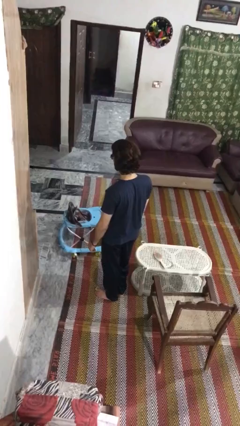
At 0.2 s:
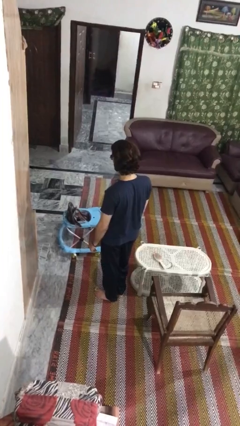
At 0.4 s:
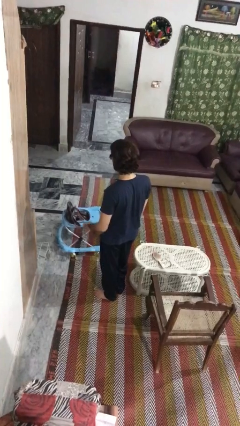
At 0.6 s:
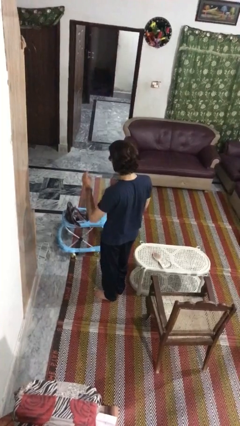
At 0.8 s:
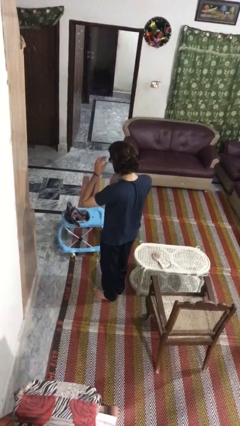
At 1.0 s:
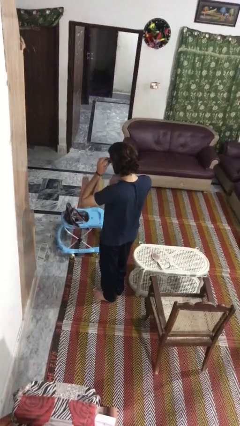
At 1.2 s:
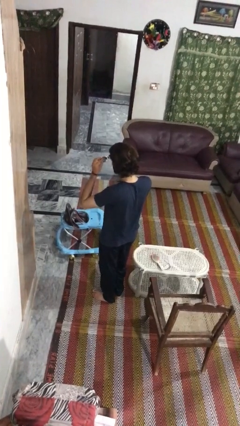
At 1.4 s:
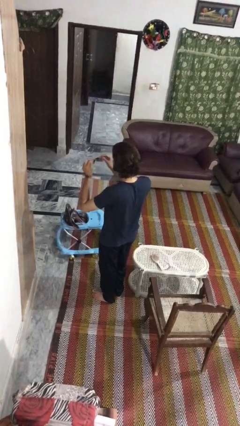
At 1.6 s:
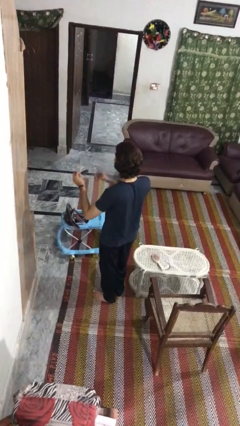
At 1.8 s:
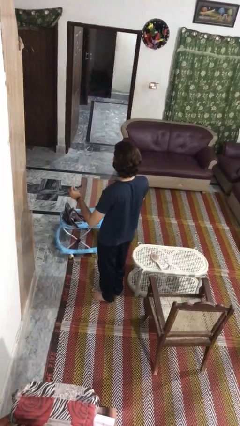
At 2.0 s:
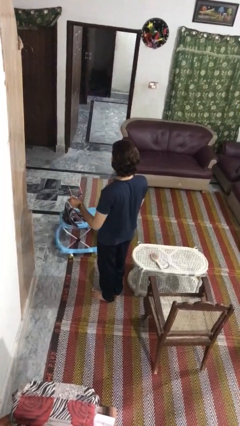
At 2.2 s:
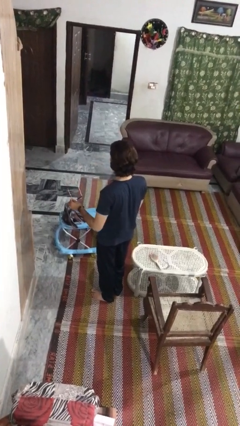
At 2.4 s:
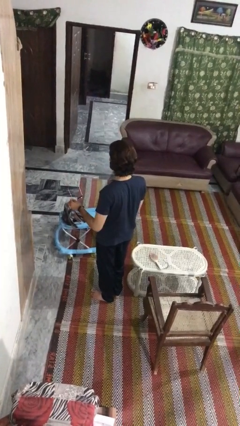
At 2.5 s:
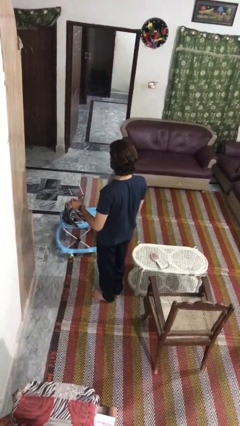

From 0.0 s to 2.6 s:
person takes off sunglasses

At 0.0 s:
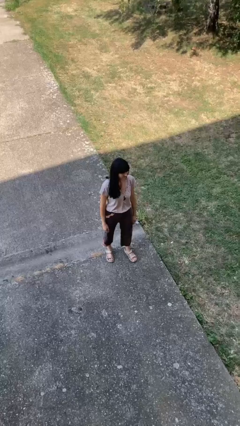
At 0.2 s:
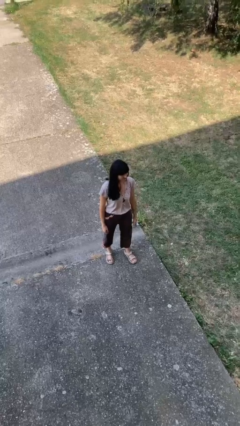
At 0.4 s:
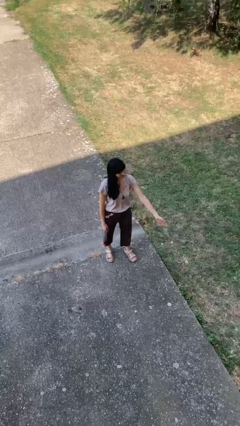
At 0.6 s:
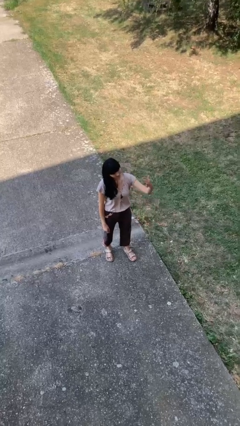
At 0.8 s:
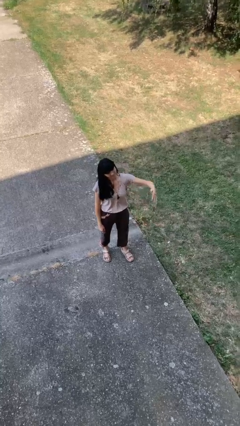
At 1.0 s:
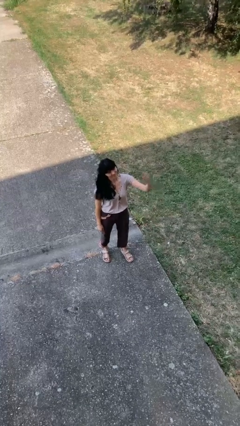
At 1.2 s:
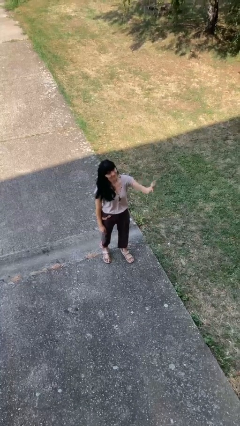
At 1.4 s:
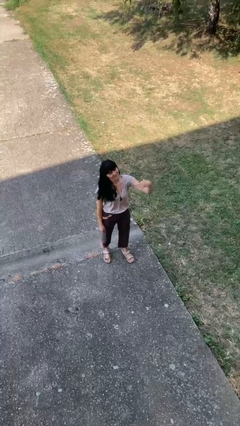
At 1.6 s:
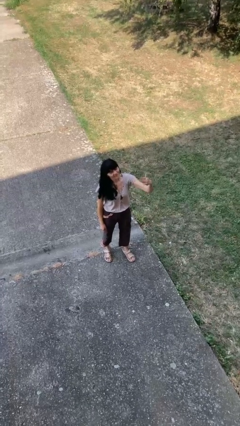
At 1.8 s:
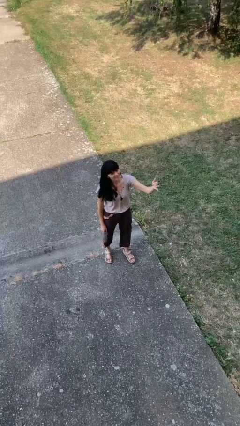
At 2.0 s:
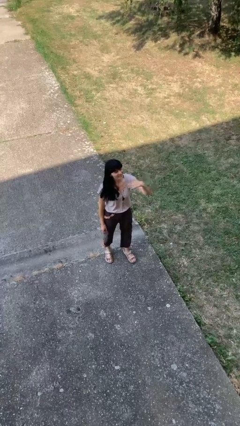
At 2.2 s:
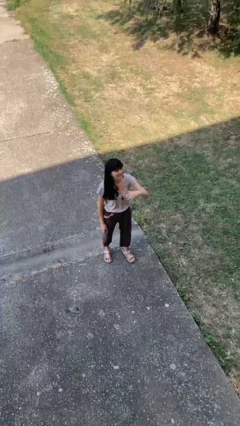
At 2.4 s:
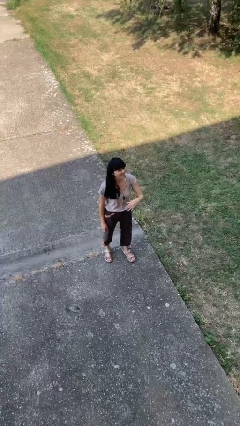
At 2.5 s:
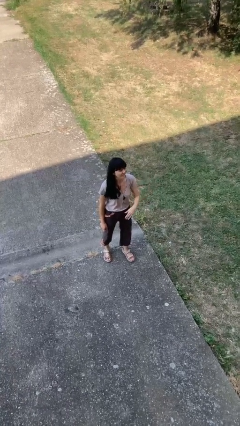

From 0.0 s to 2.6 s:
person gestures come here

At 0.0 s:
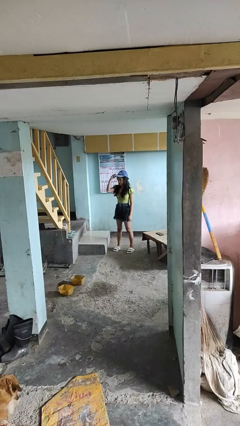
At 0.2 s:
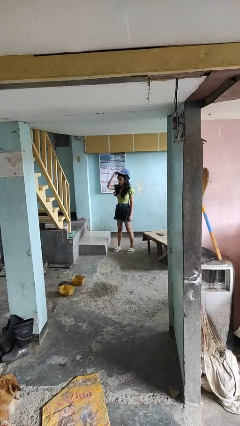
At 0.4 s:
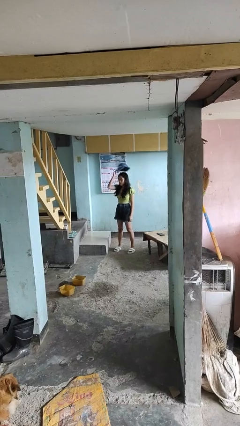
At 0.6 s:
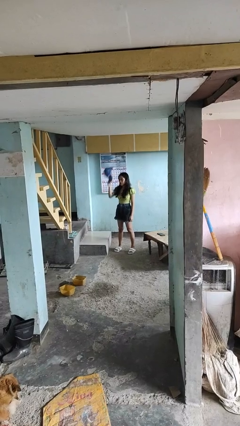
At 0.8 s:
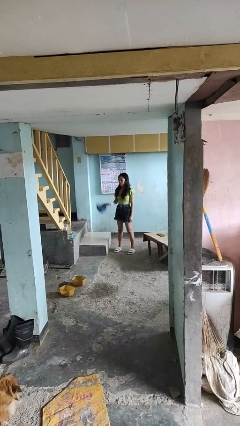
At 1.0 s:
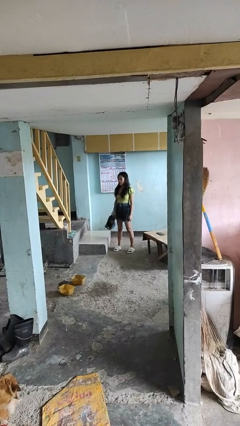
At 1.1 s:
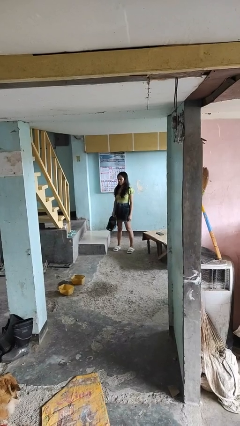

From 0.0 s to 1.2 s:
person takes off hat

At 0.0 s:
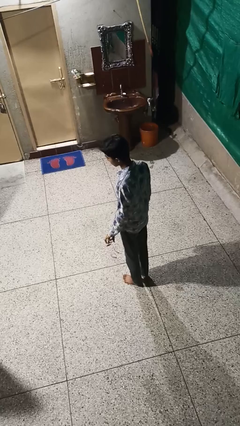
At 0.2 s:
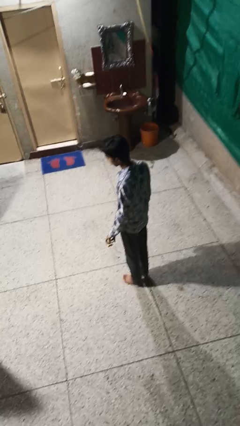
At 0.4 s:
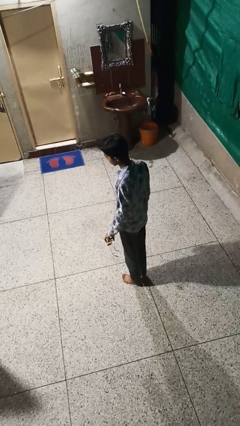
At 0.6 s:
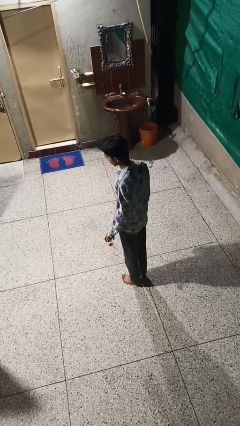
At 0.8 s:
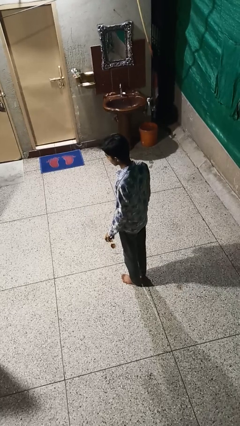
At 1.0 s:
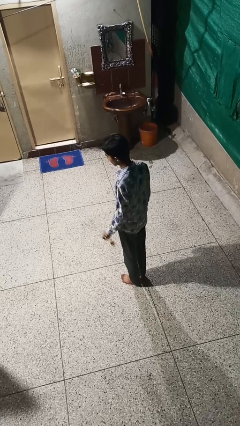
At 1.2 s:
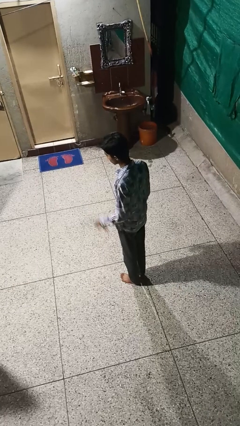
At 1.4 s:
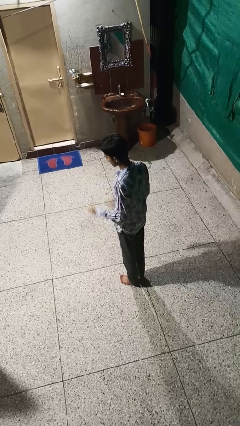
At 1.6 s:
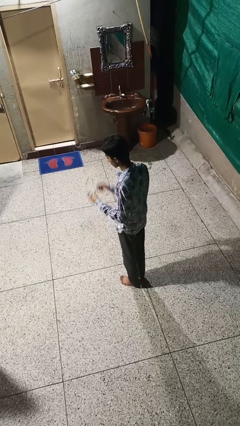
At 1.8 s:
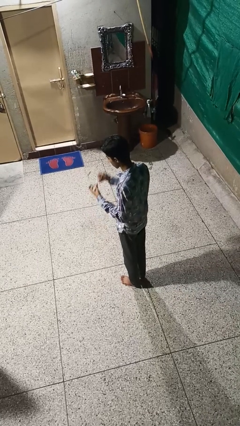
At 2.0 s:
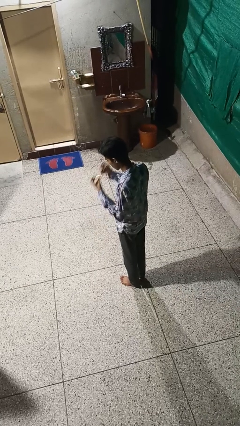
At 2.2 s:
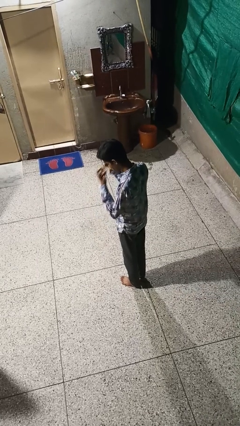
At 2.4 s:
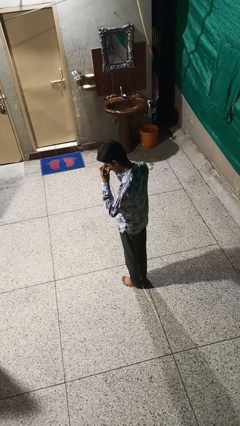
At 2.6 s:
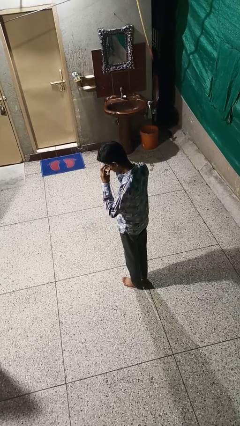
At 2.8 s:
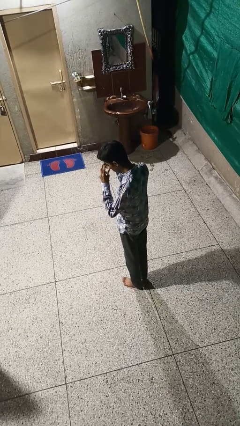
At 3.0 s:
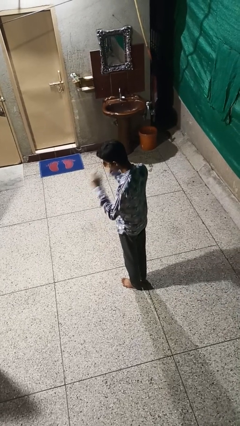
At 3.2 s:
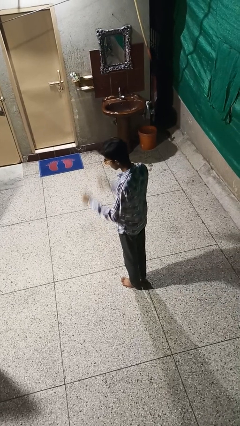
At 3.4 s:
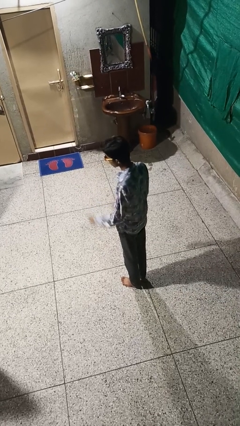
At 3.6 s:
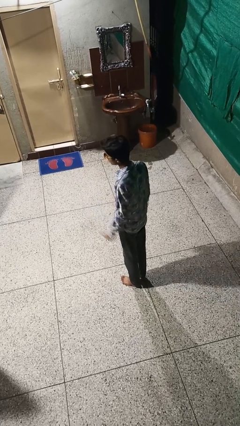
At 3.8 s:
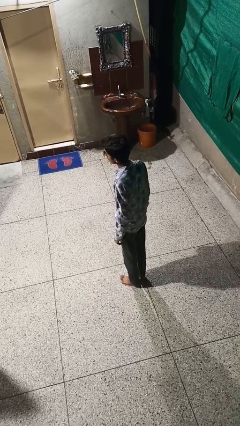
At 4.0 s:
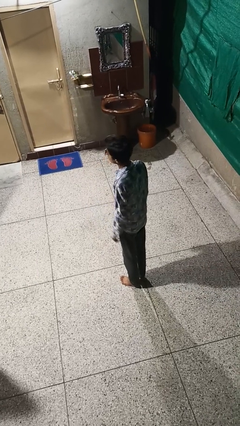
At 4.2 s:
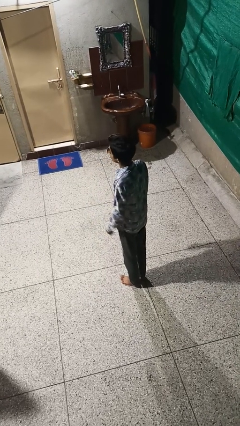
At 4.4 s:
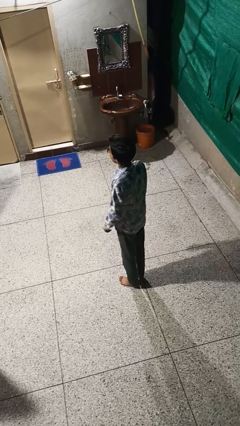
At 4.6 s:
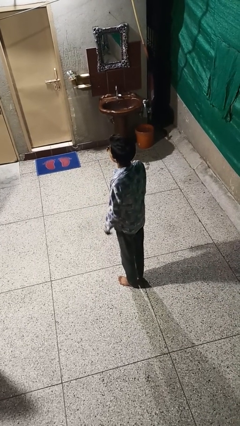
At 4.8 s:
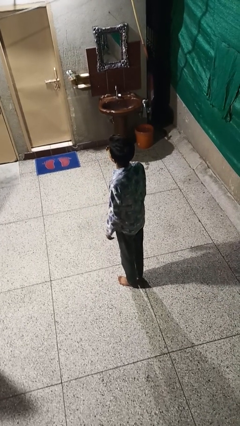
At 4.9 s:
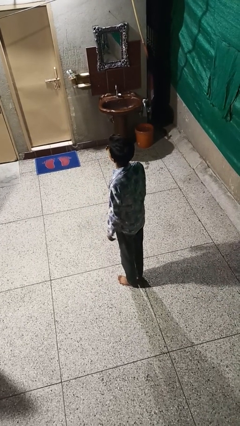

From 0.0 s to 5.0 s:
person puts on sunglasses

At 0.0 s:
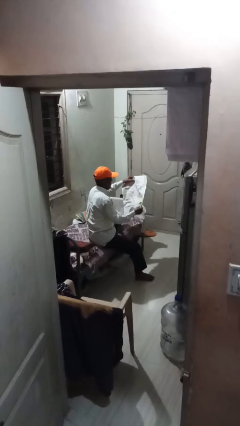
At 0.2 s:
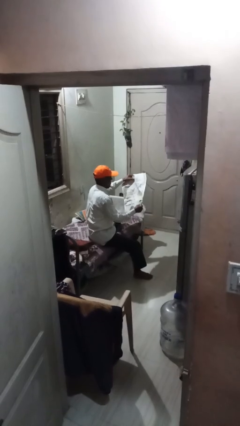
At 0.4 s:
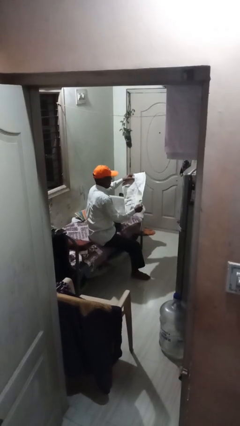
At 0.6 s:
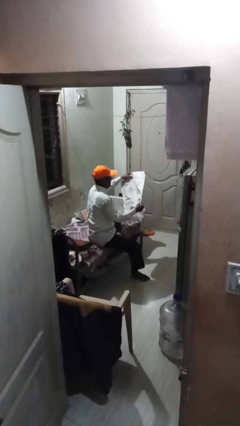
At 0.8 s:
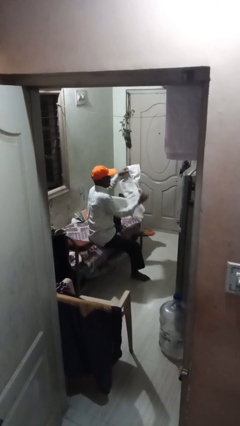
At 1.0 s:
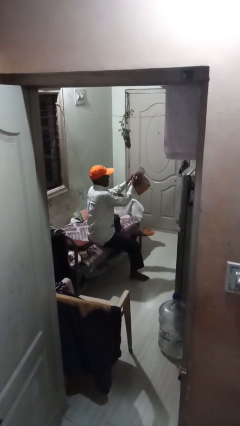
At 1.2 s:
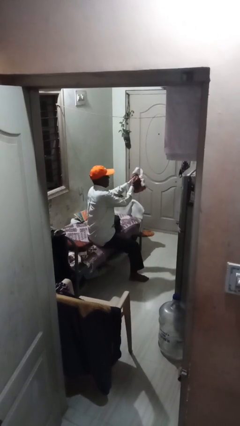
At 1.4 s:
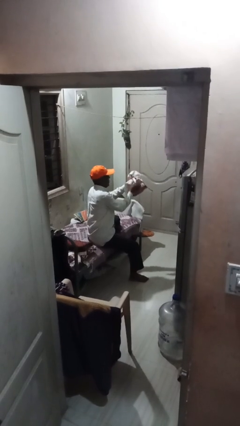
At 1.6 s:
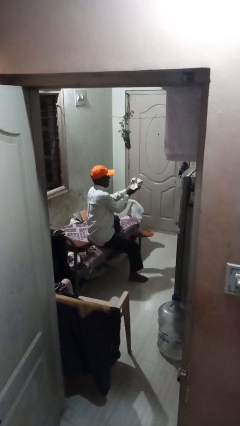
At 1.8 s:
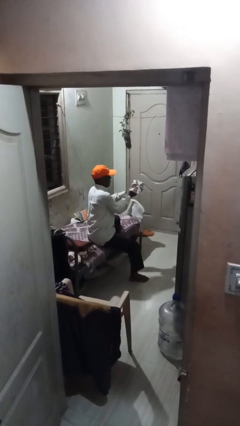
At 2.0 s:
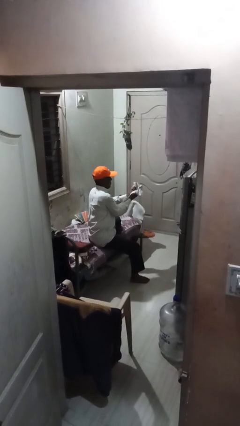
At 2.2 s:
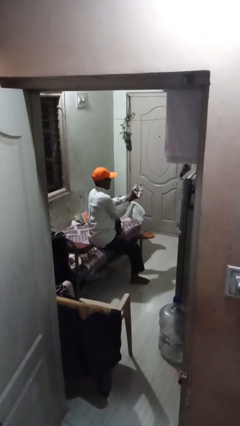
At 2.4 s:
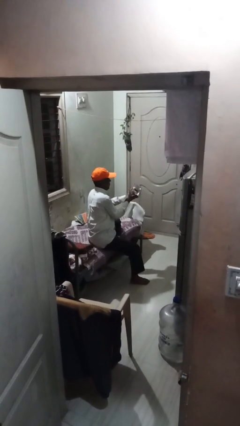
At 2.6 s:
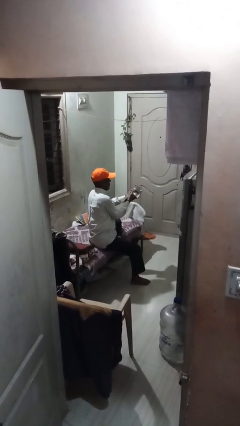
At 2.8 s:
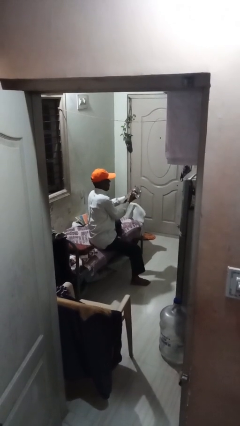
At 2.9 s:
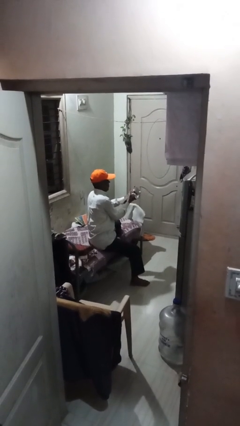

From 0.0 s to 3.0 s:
person crumples paper

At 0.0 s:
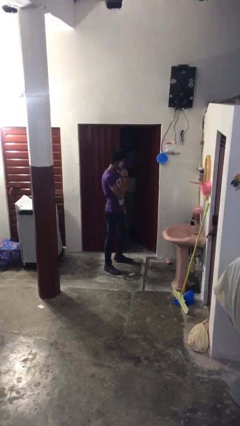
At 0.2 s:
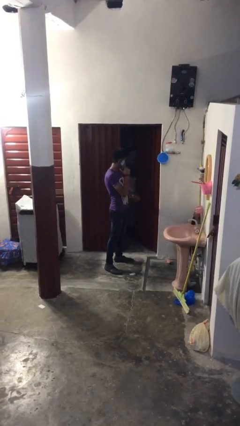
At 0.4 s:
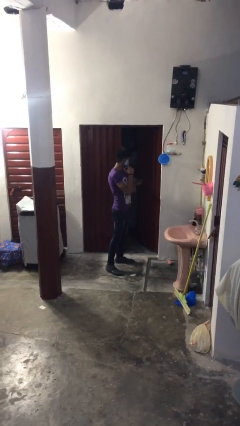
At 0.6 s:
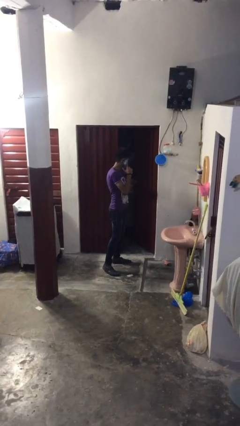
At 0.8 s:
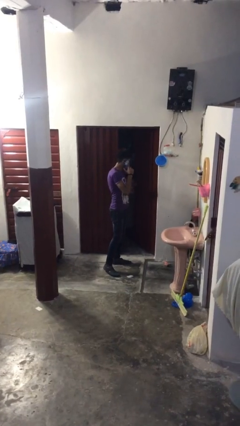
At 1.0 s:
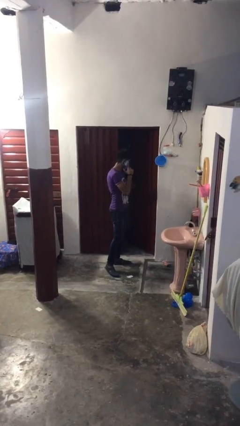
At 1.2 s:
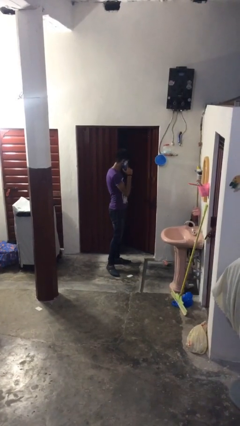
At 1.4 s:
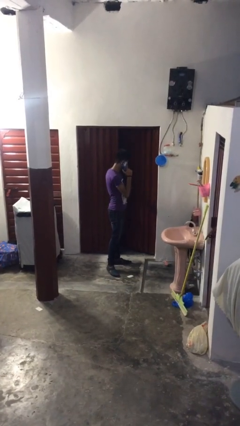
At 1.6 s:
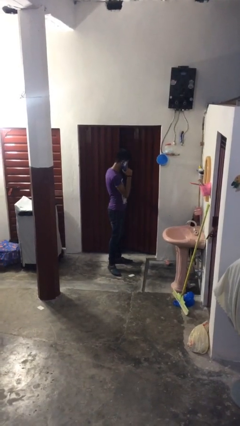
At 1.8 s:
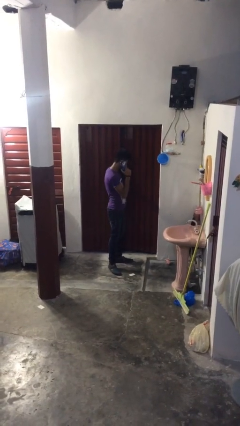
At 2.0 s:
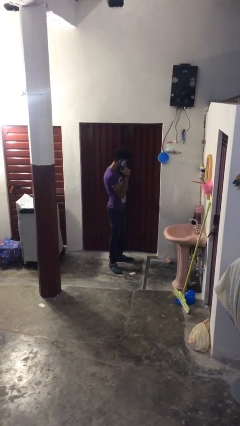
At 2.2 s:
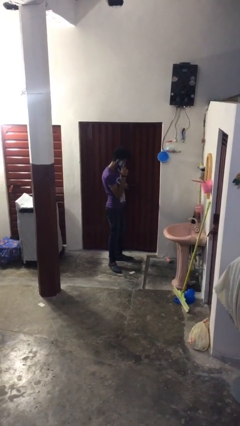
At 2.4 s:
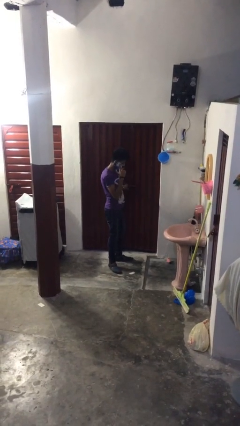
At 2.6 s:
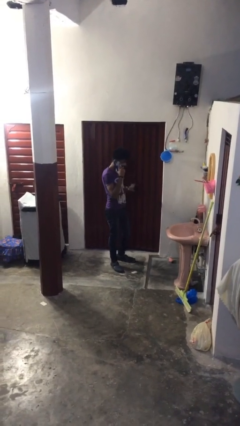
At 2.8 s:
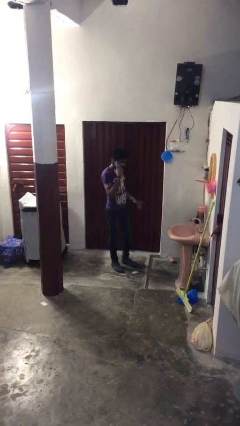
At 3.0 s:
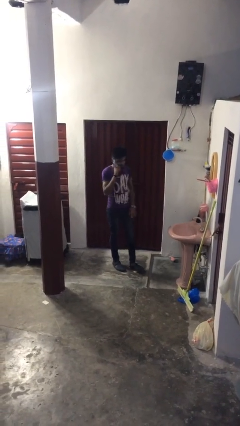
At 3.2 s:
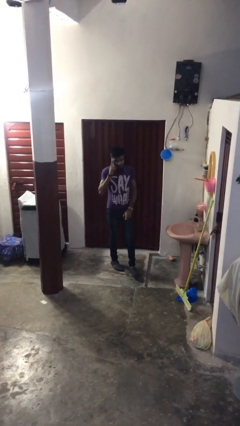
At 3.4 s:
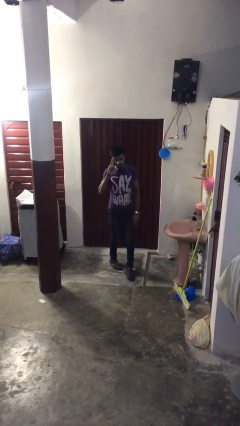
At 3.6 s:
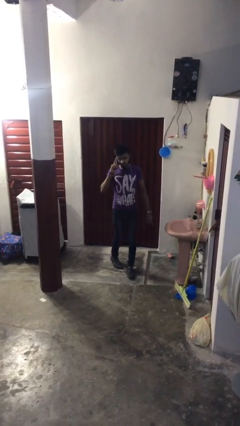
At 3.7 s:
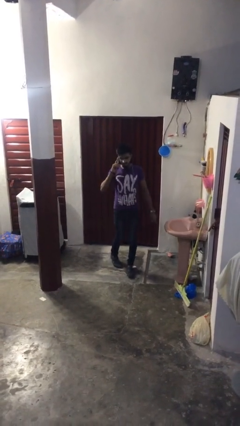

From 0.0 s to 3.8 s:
person closes facility door
